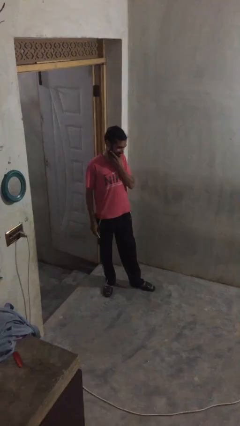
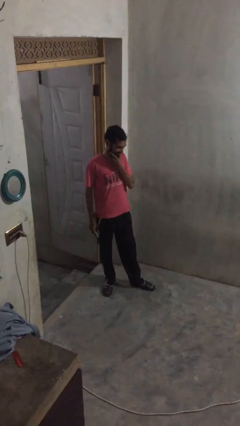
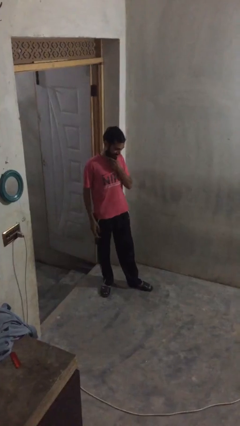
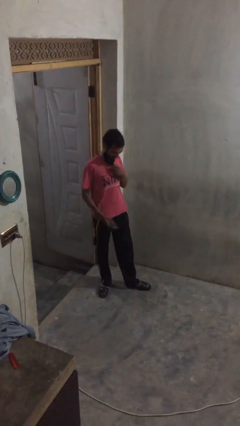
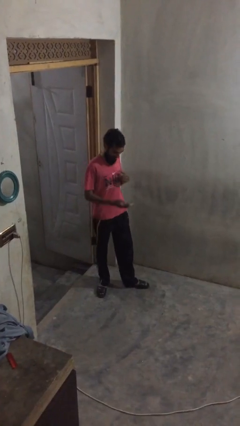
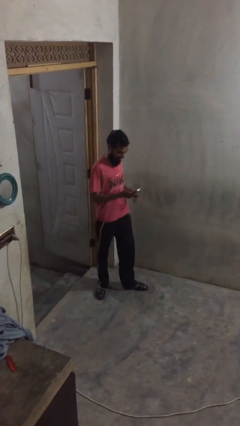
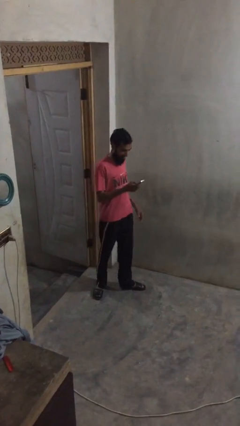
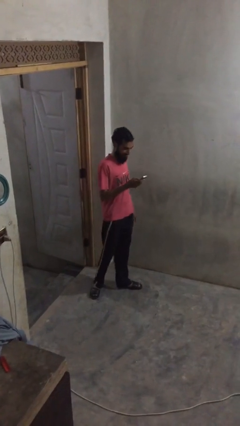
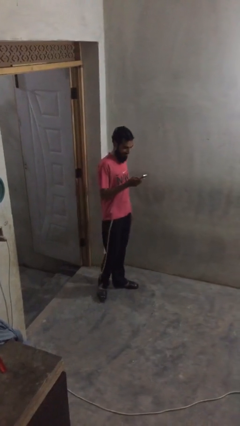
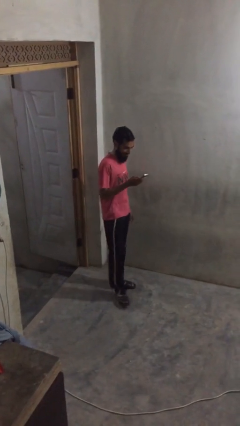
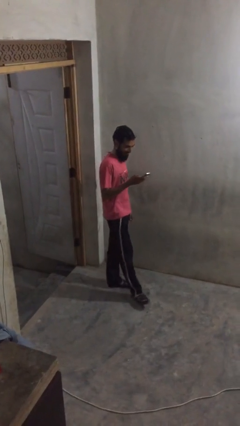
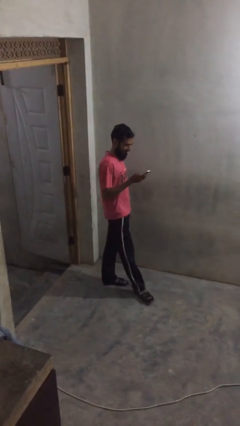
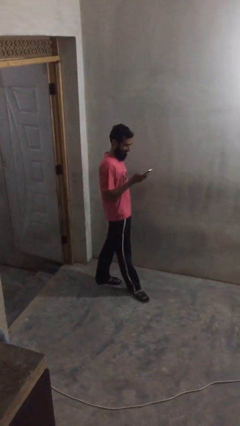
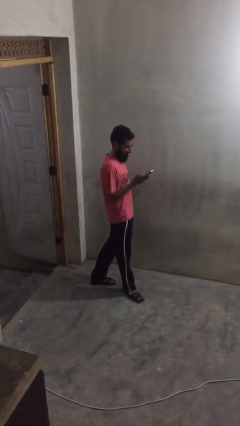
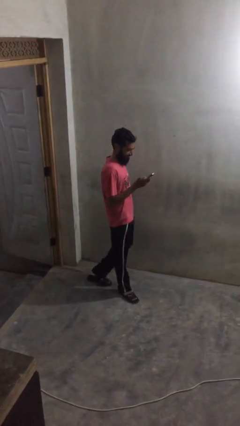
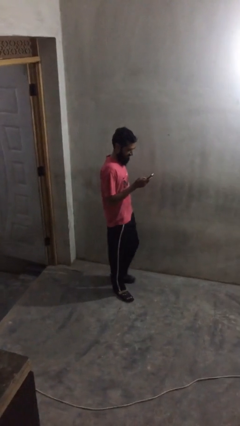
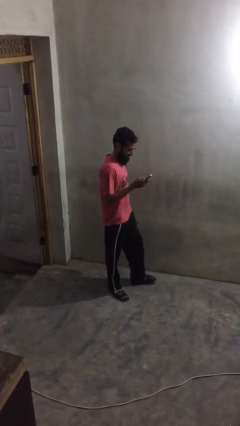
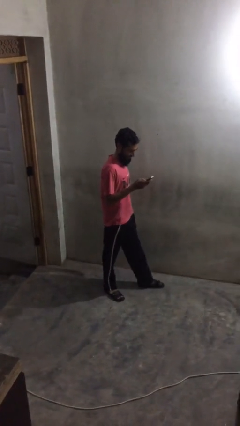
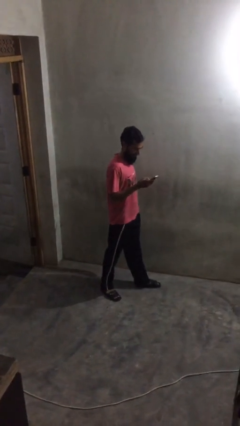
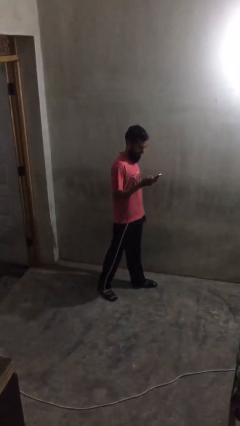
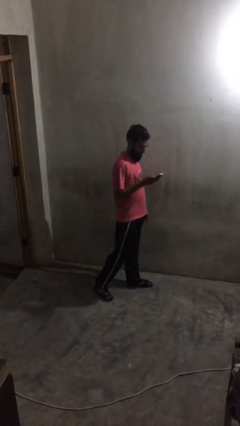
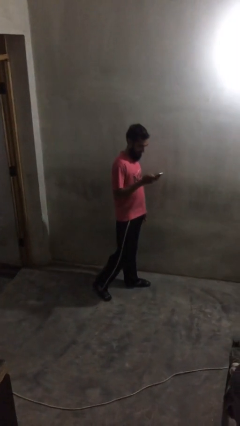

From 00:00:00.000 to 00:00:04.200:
person texts on phone

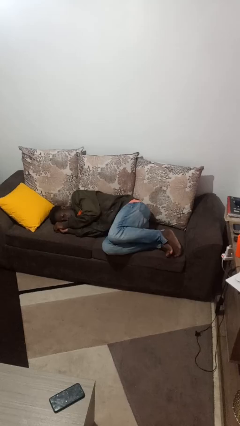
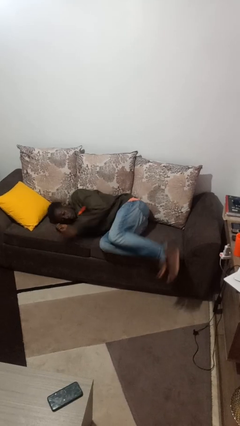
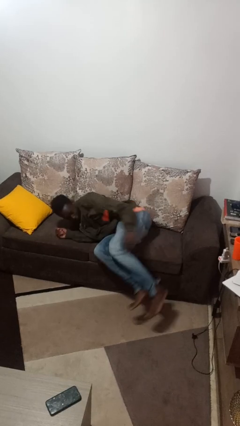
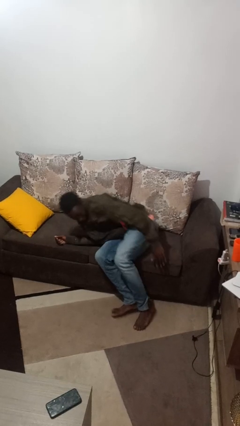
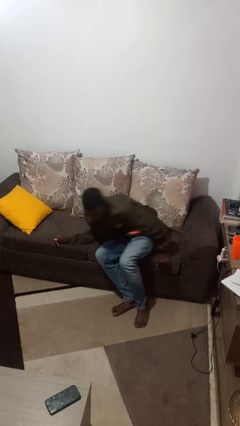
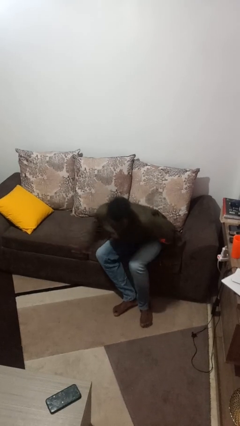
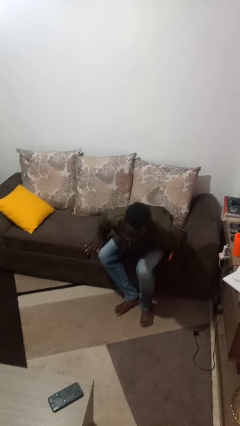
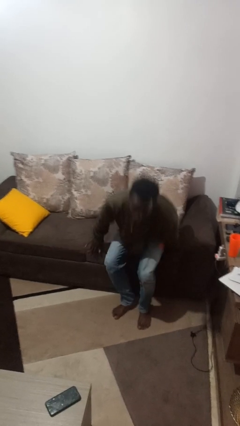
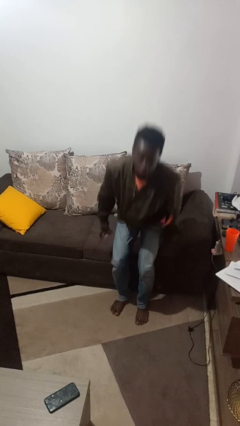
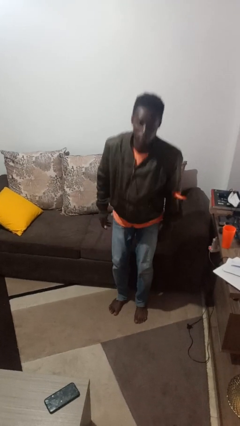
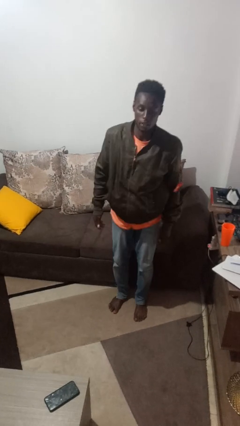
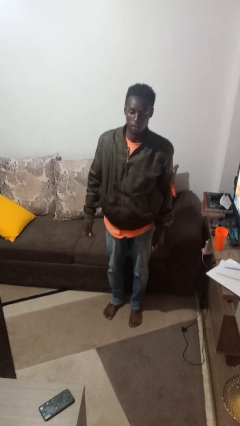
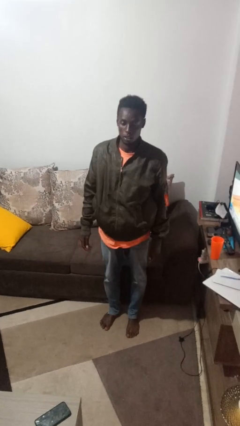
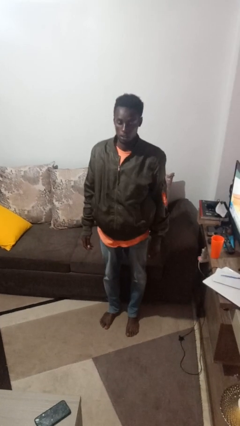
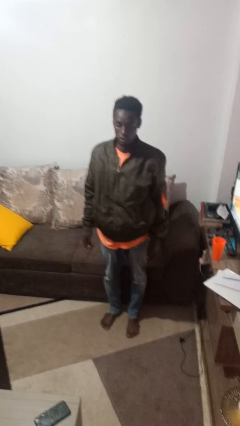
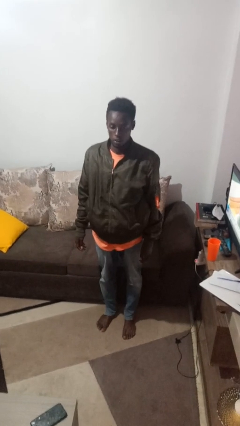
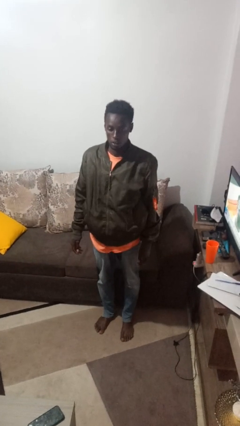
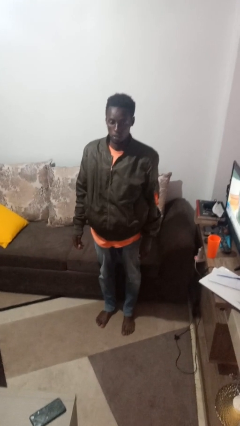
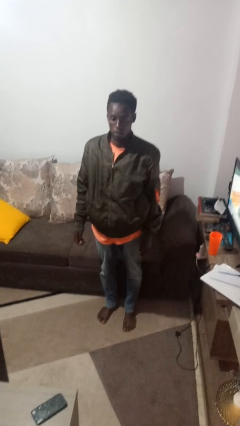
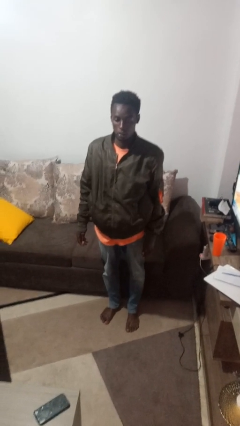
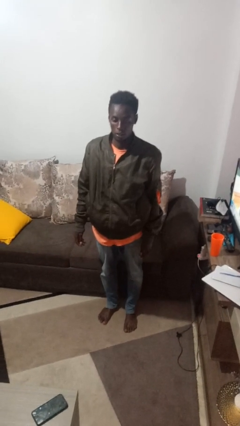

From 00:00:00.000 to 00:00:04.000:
person stands up

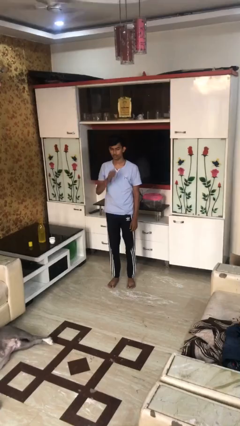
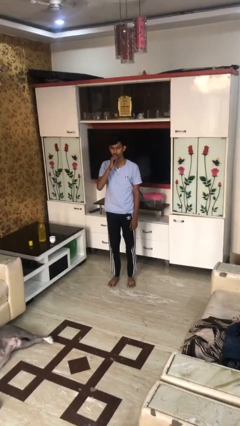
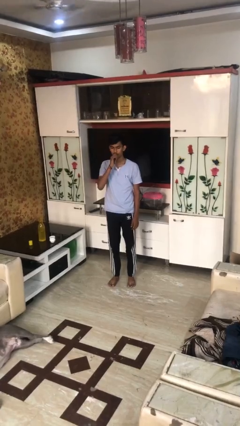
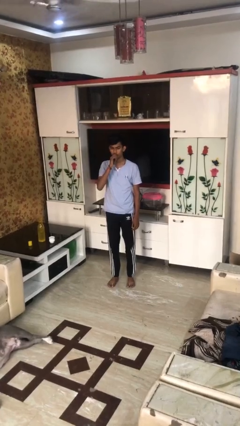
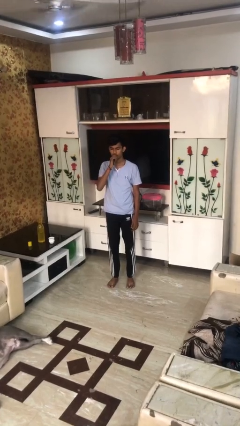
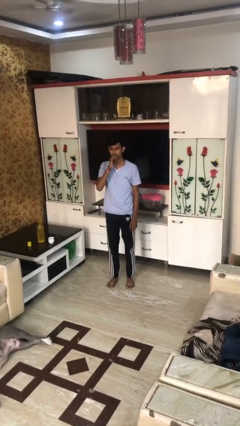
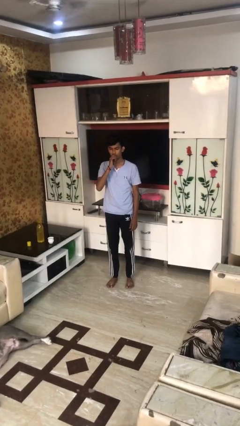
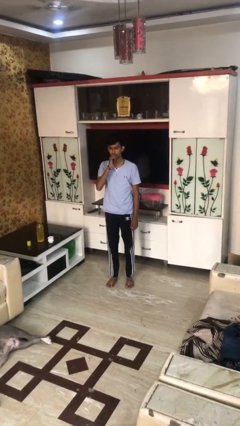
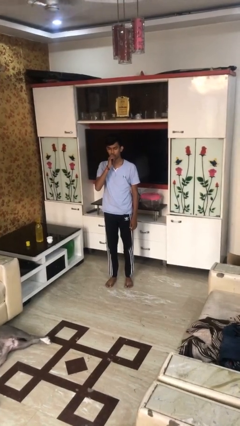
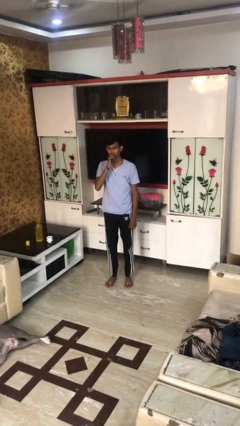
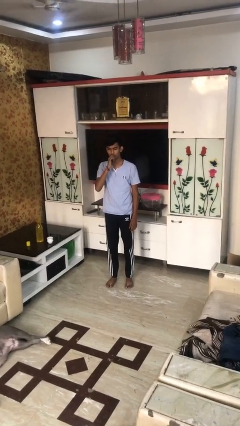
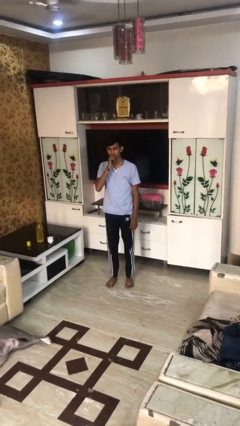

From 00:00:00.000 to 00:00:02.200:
person vapes

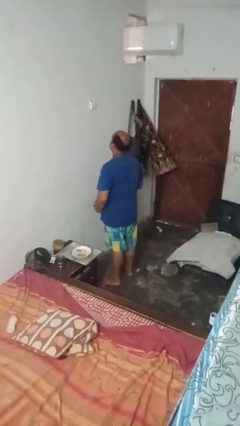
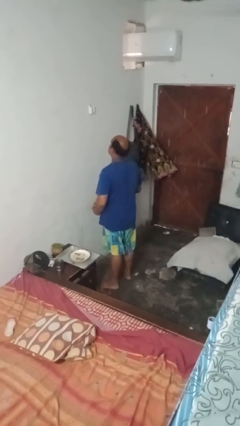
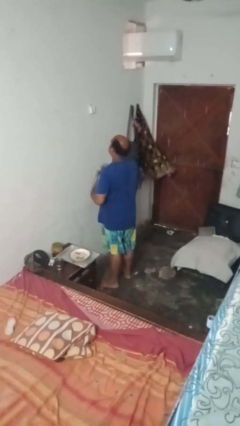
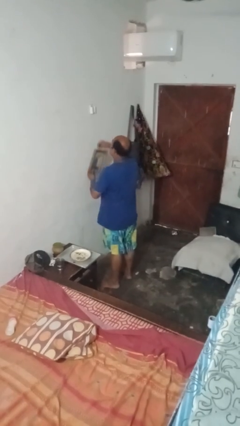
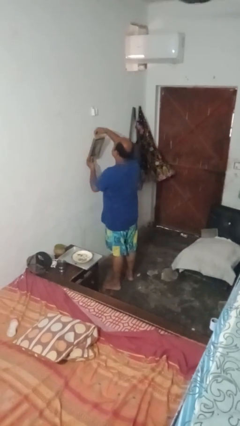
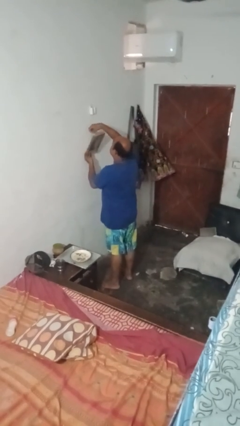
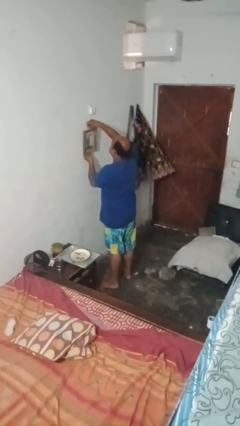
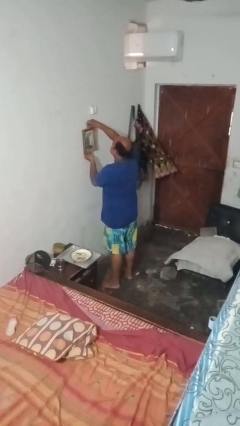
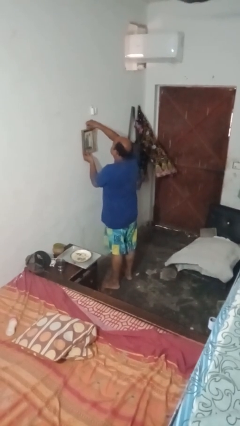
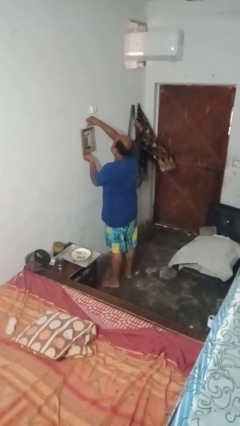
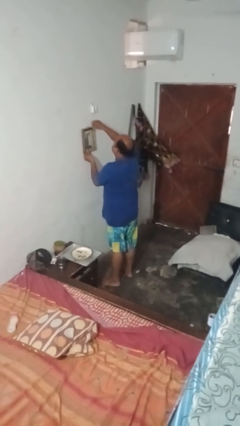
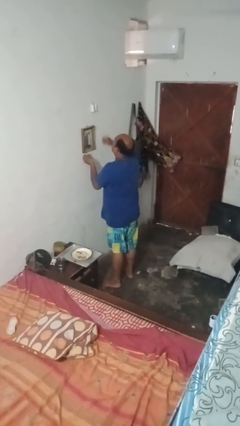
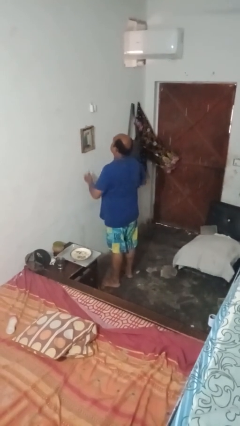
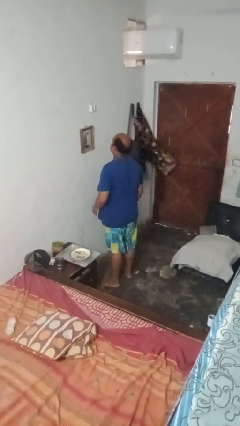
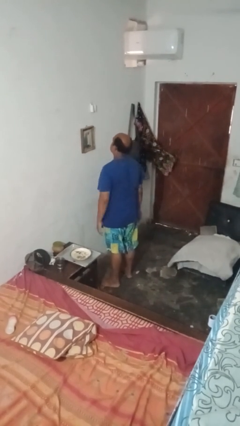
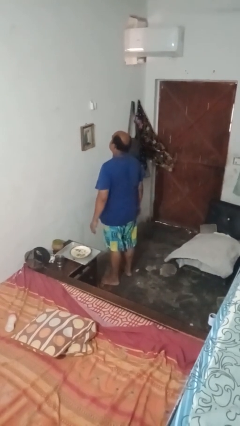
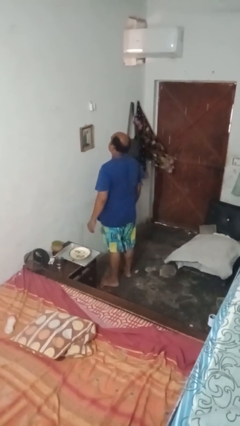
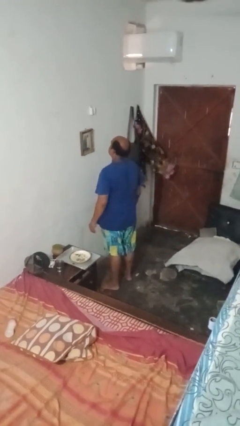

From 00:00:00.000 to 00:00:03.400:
person puts up picture frame

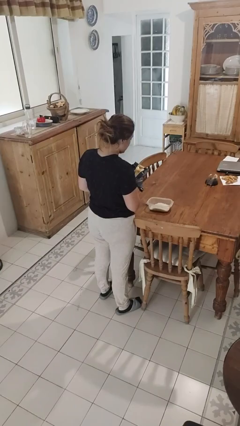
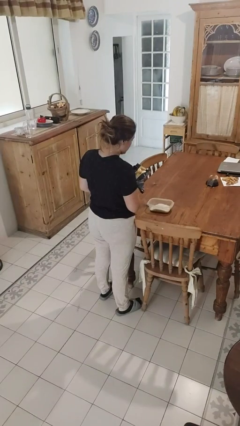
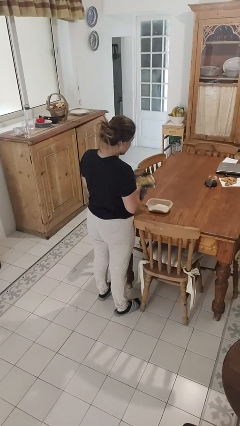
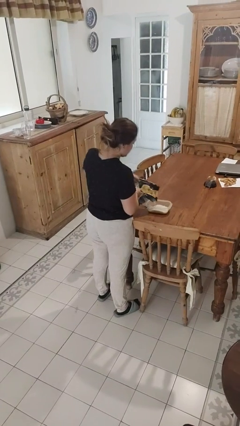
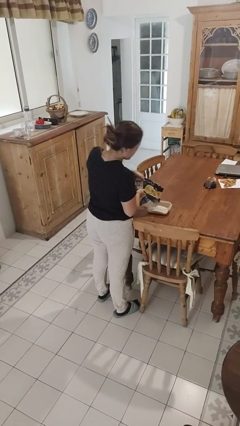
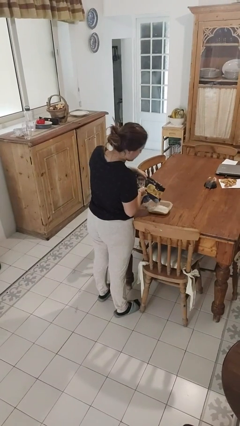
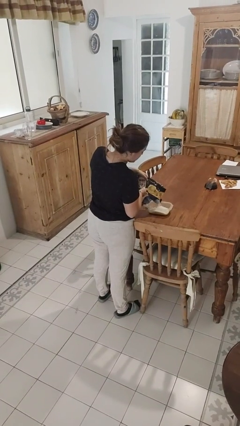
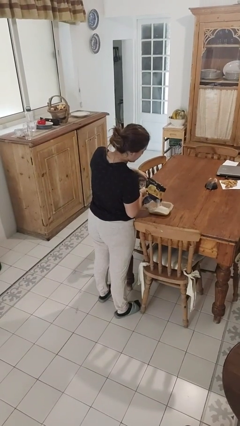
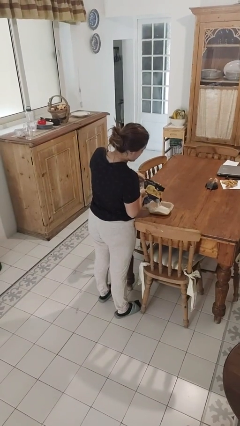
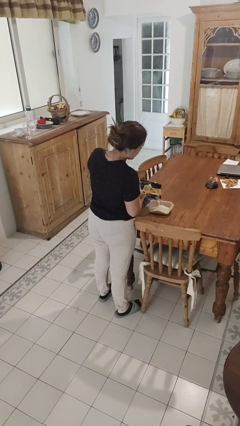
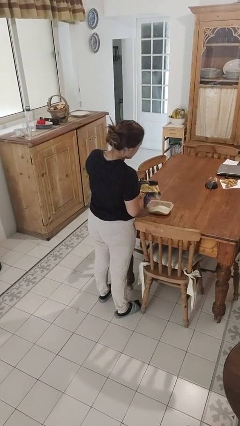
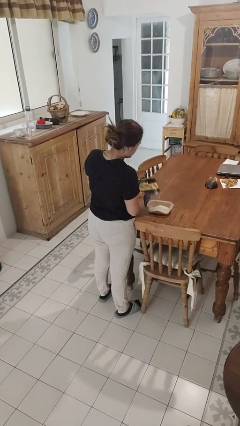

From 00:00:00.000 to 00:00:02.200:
person pours into bowl

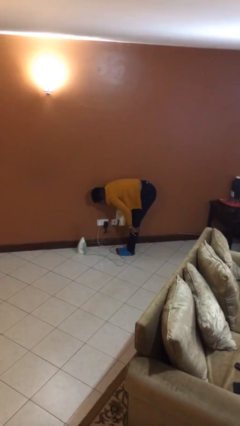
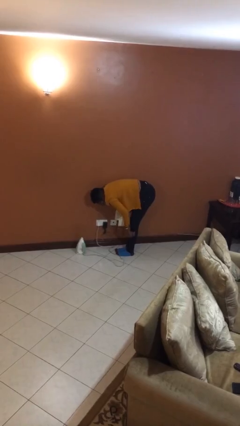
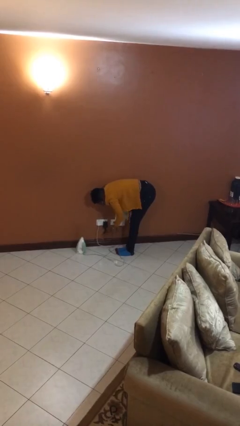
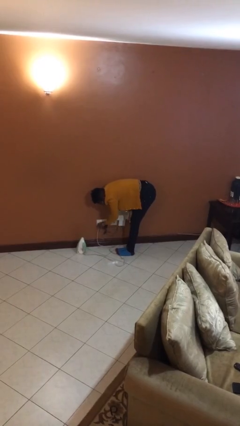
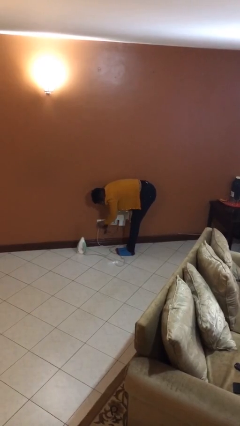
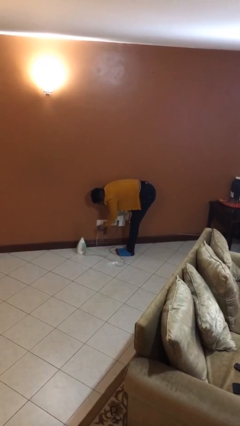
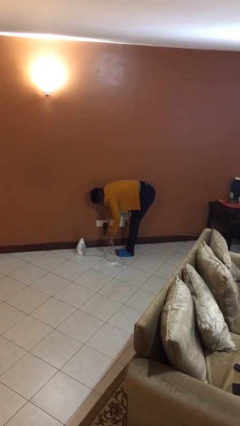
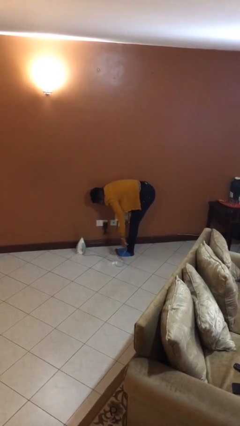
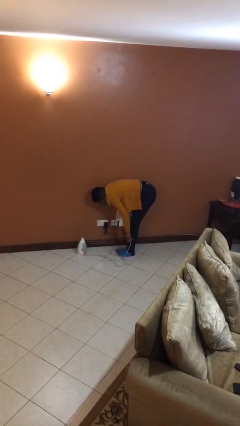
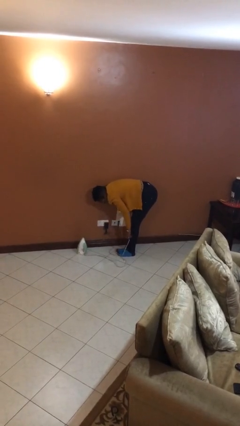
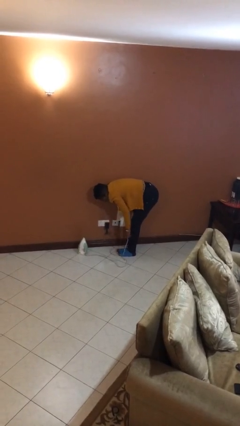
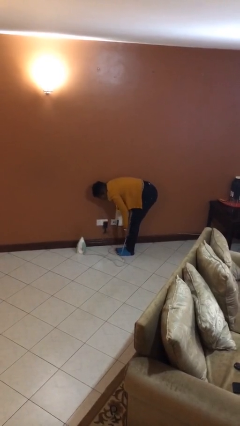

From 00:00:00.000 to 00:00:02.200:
person unplugs from electrical socket
